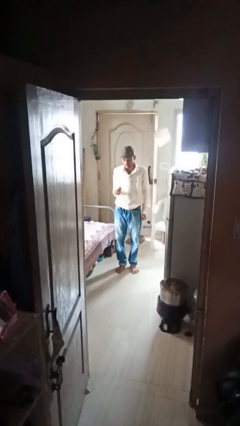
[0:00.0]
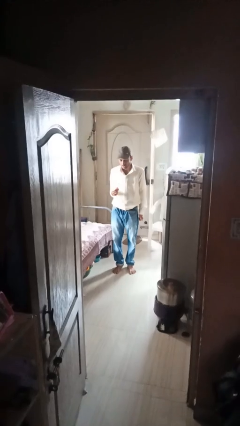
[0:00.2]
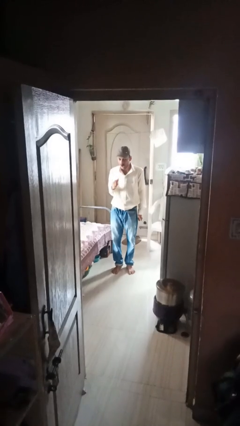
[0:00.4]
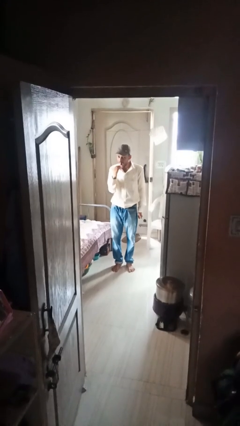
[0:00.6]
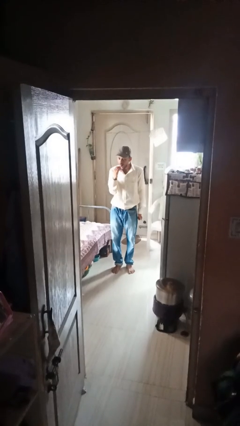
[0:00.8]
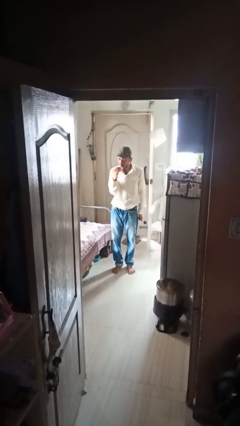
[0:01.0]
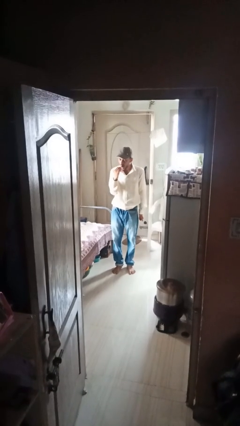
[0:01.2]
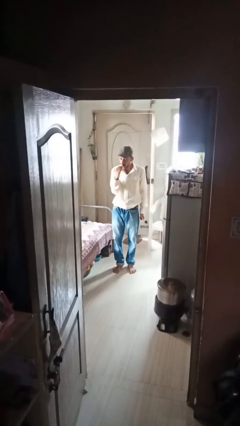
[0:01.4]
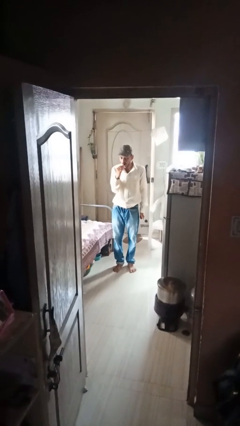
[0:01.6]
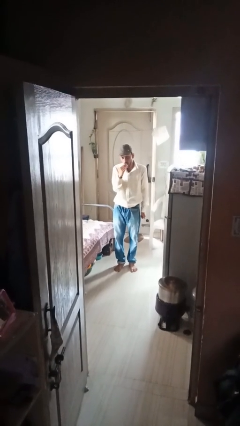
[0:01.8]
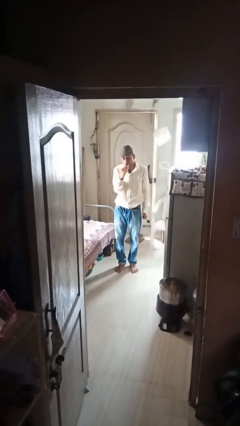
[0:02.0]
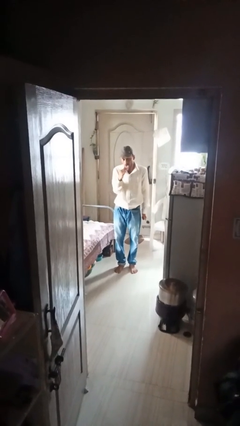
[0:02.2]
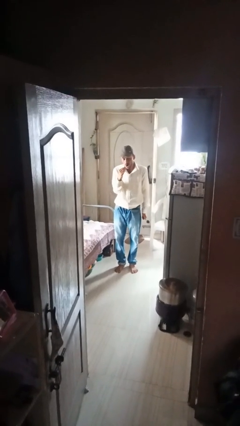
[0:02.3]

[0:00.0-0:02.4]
person brushes teeth

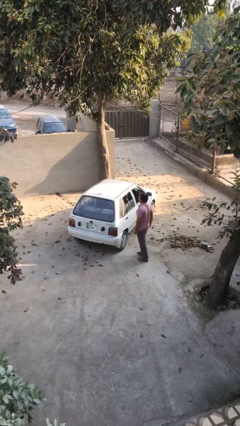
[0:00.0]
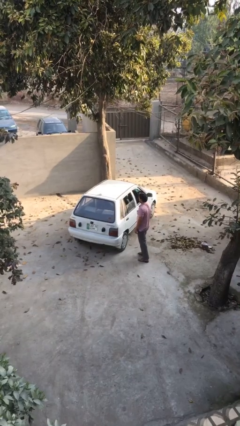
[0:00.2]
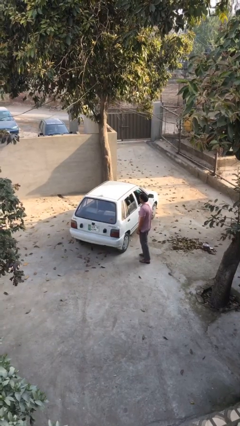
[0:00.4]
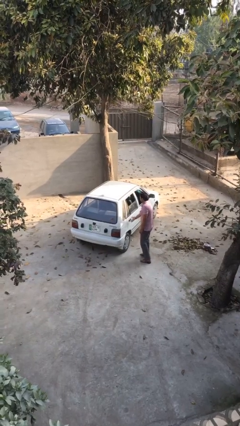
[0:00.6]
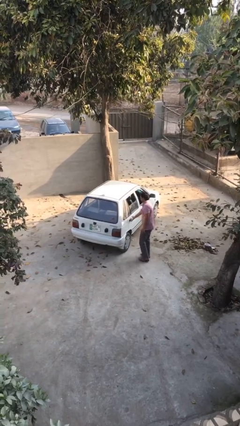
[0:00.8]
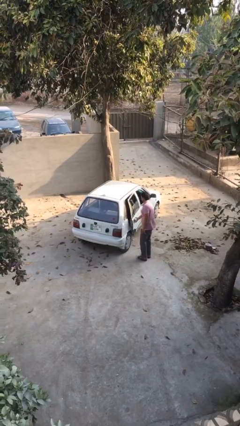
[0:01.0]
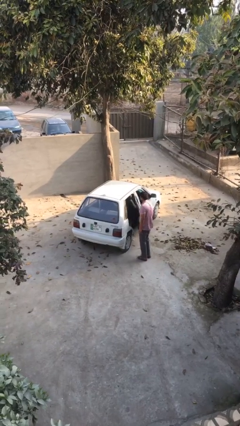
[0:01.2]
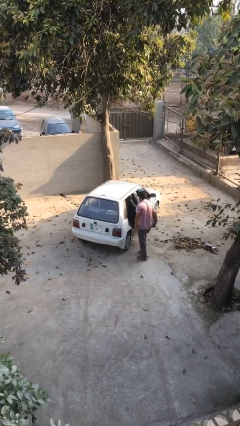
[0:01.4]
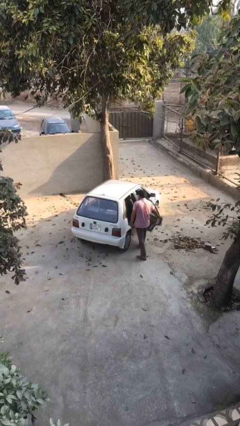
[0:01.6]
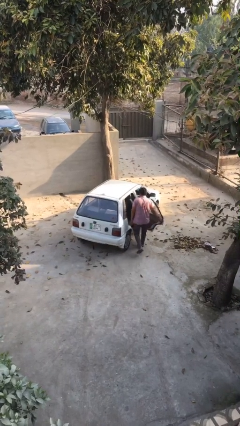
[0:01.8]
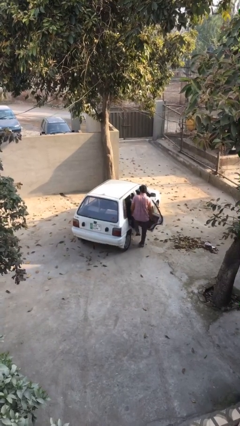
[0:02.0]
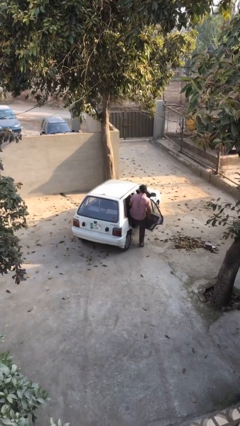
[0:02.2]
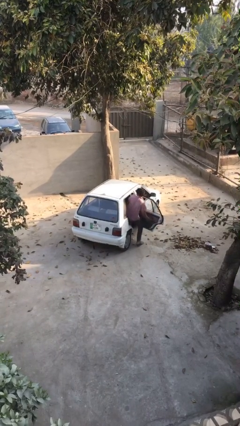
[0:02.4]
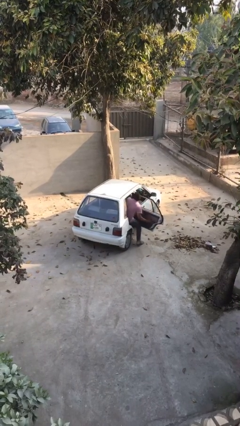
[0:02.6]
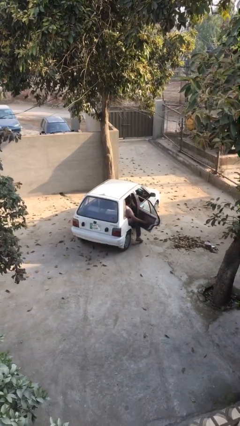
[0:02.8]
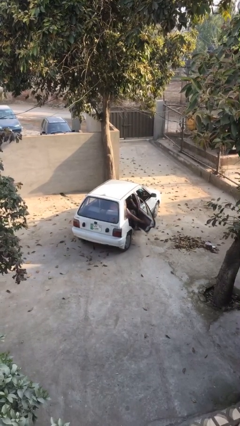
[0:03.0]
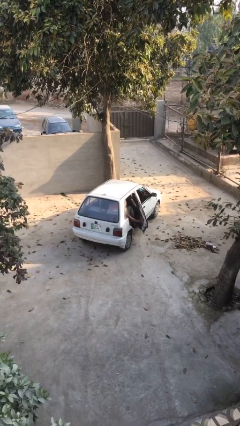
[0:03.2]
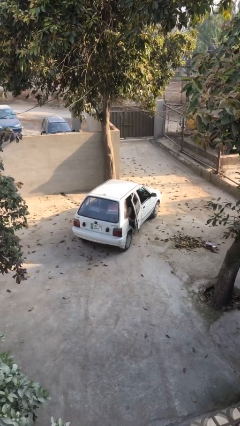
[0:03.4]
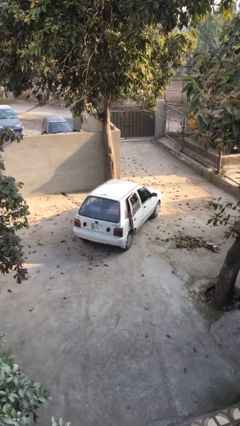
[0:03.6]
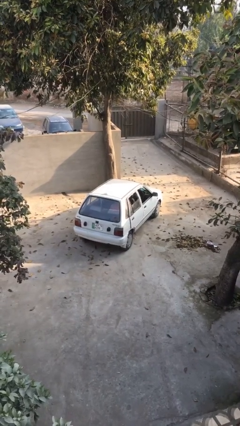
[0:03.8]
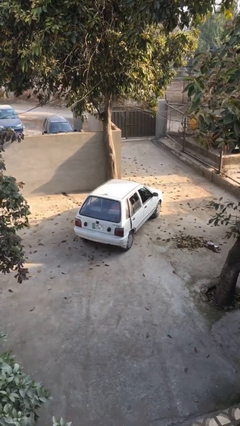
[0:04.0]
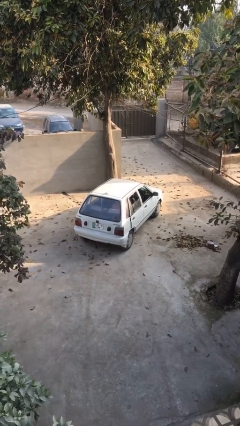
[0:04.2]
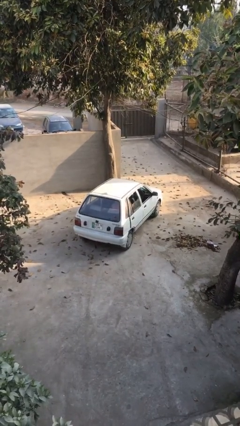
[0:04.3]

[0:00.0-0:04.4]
car picks up person

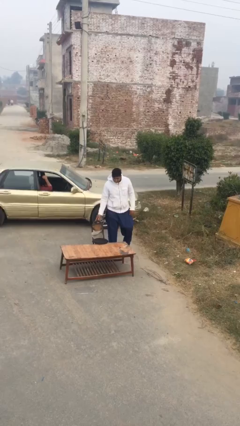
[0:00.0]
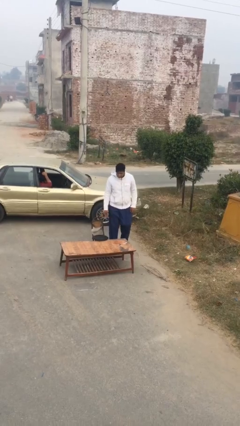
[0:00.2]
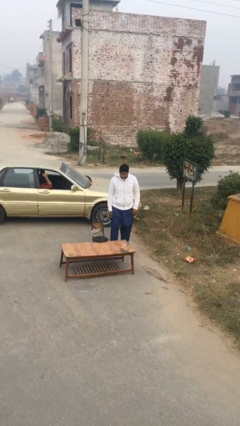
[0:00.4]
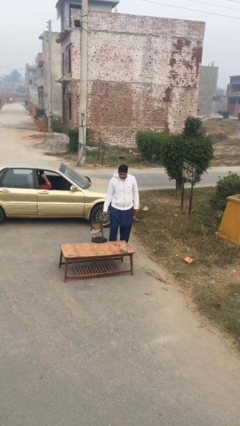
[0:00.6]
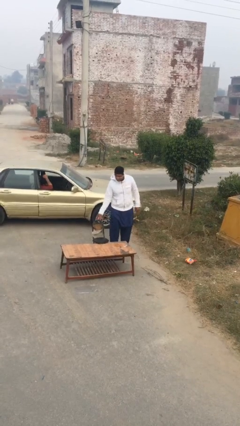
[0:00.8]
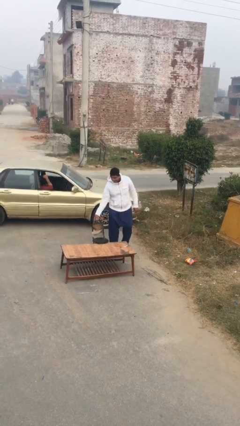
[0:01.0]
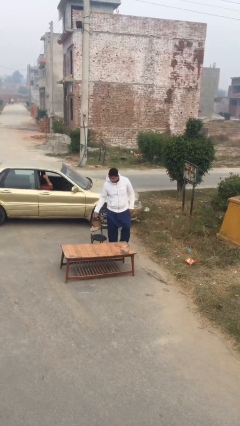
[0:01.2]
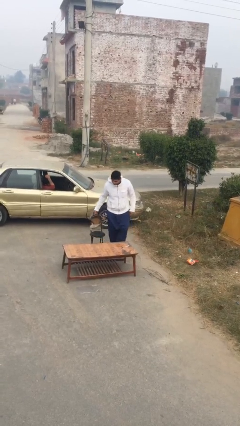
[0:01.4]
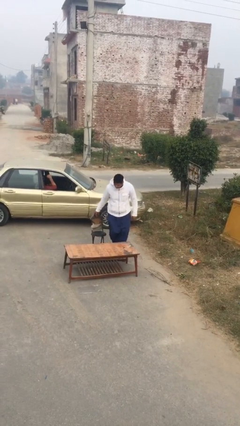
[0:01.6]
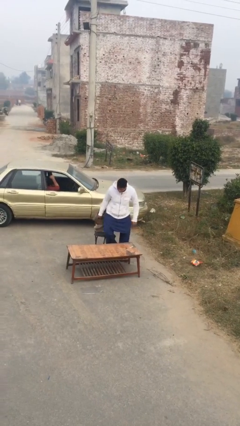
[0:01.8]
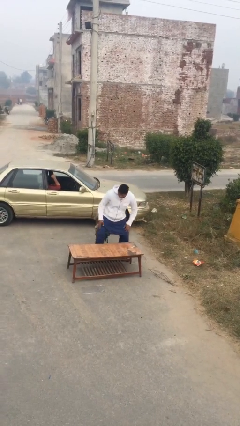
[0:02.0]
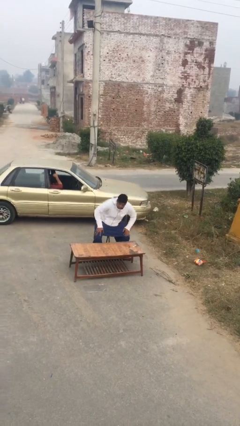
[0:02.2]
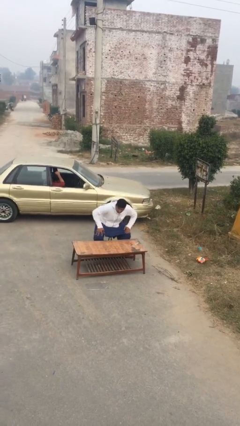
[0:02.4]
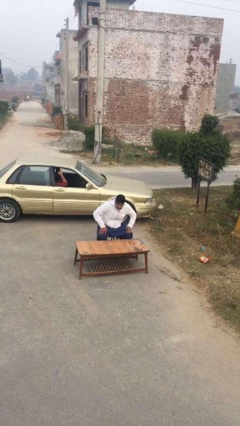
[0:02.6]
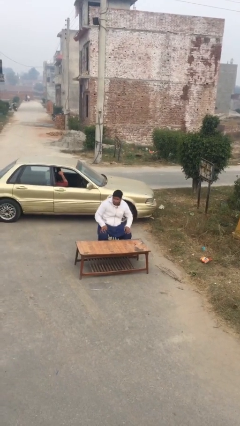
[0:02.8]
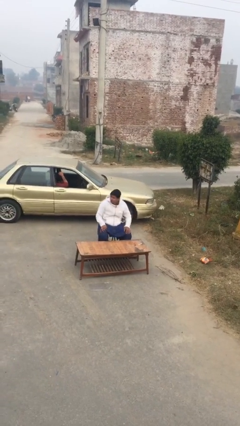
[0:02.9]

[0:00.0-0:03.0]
person sits down

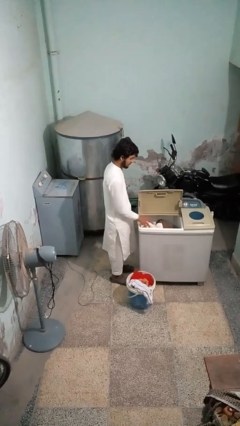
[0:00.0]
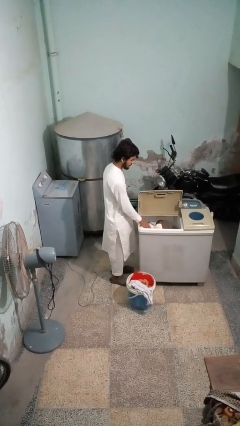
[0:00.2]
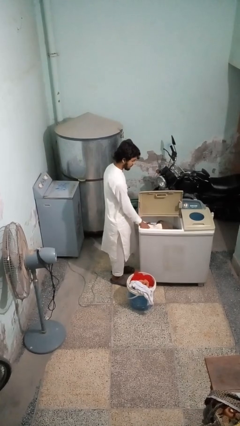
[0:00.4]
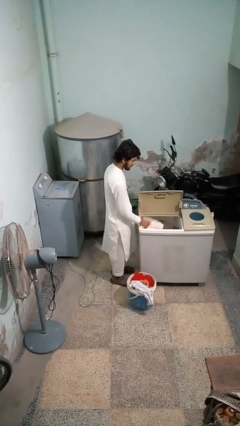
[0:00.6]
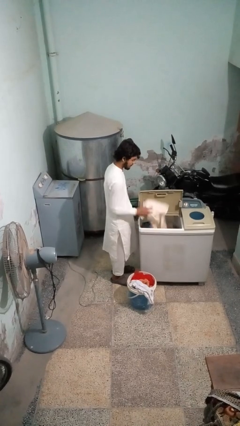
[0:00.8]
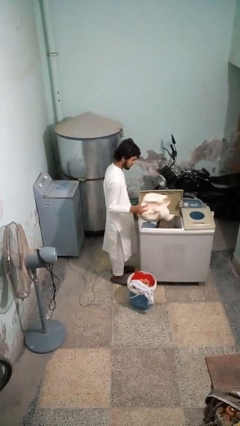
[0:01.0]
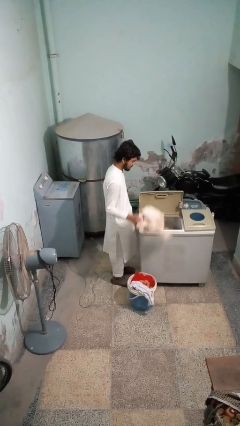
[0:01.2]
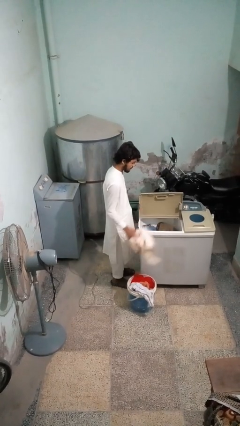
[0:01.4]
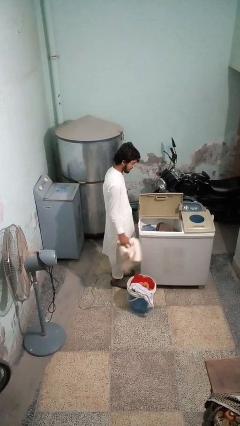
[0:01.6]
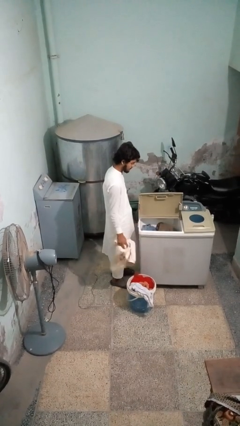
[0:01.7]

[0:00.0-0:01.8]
person unloads clotheswasher

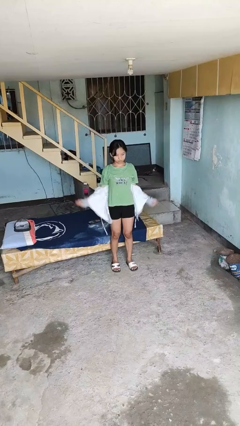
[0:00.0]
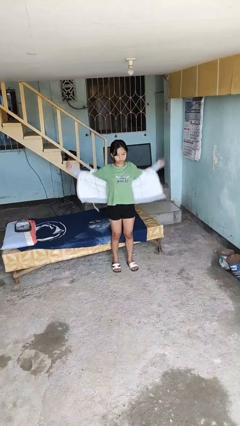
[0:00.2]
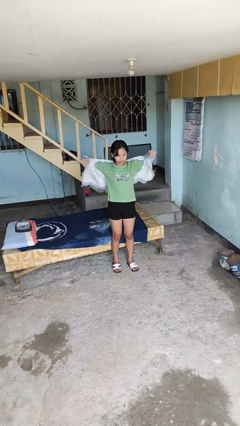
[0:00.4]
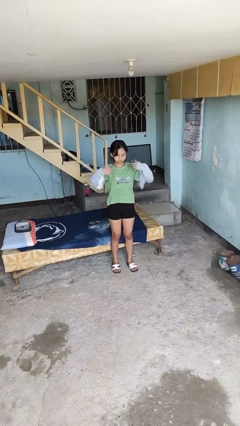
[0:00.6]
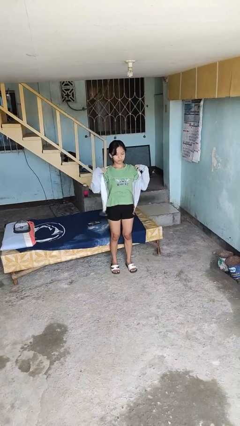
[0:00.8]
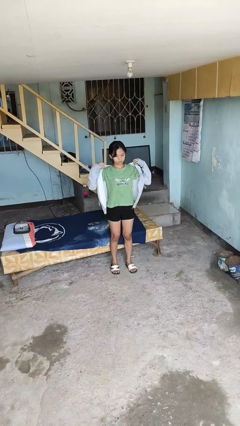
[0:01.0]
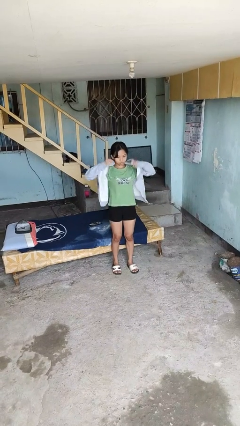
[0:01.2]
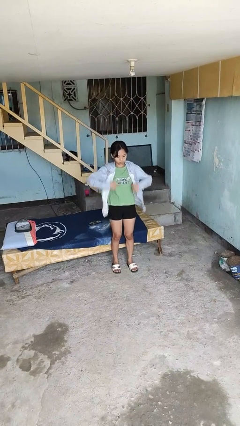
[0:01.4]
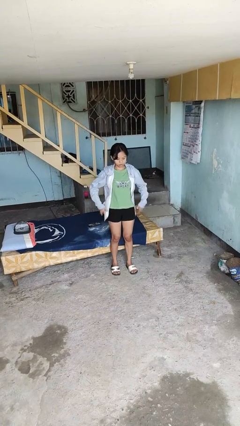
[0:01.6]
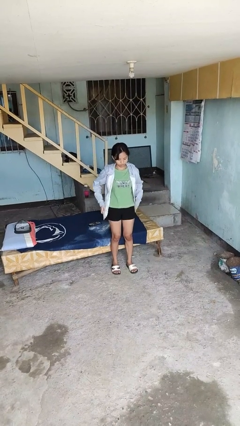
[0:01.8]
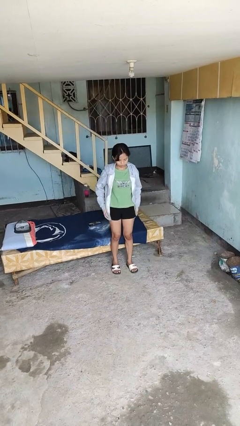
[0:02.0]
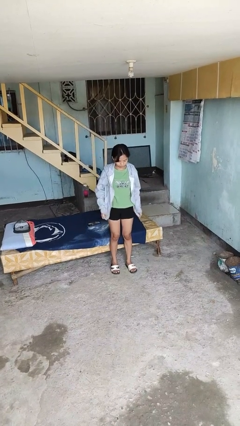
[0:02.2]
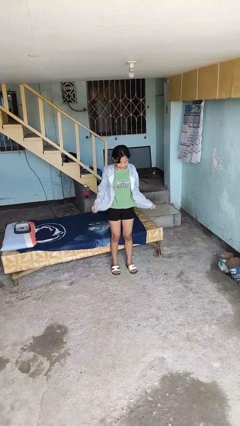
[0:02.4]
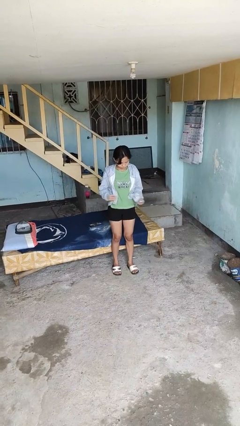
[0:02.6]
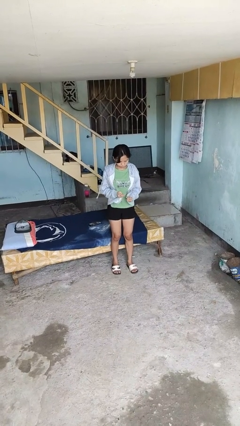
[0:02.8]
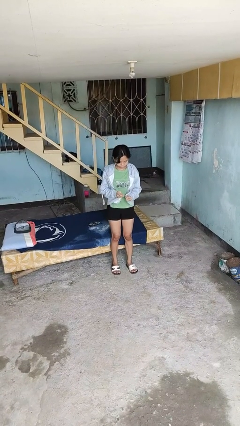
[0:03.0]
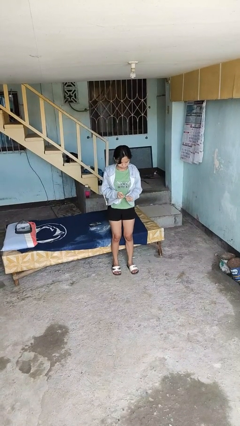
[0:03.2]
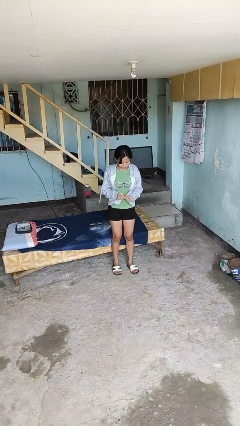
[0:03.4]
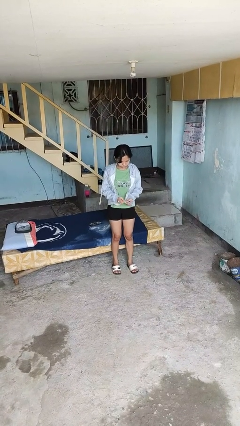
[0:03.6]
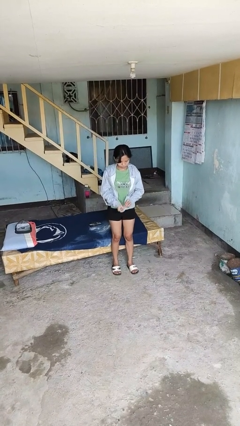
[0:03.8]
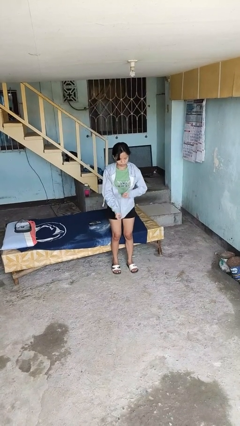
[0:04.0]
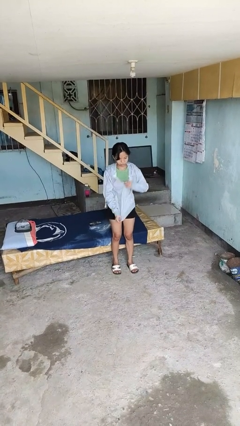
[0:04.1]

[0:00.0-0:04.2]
person puts on jacket

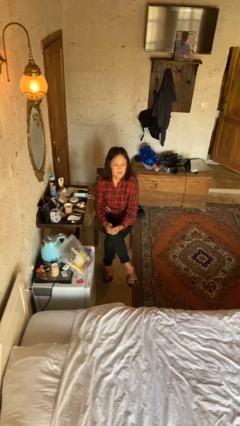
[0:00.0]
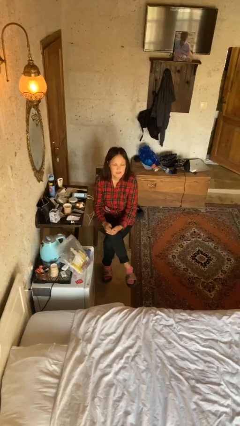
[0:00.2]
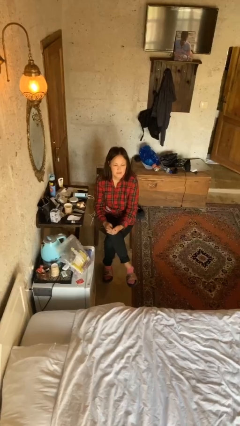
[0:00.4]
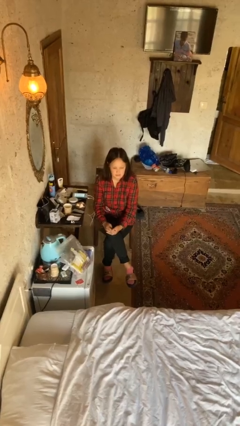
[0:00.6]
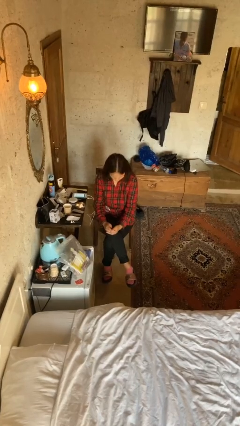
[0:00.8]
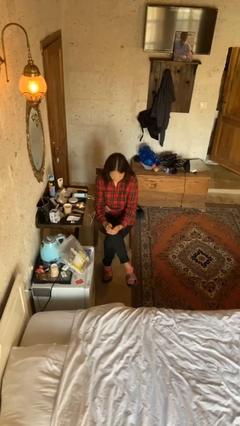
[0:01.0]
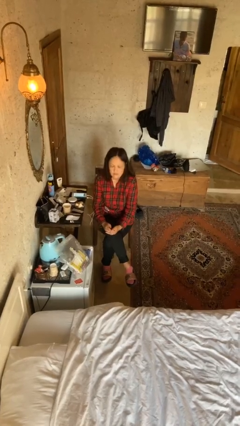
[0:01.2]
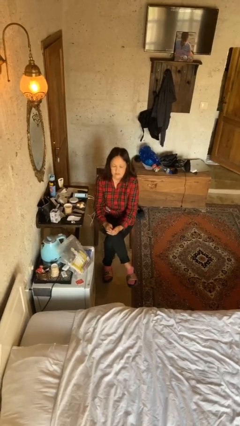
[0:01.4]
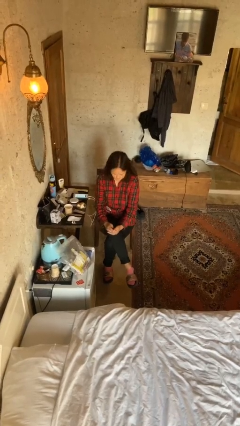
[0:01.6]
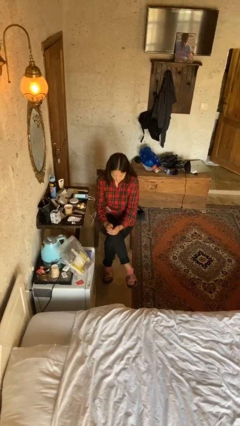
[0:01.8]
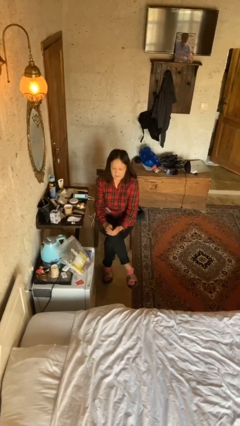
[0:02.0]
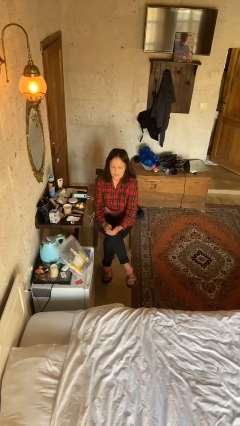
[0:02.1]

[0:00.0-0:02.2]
person nods head
